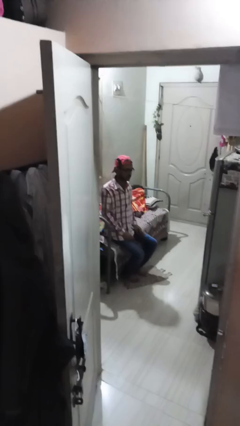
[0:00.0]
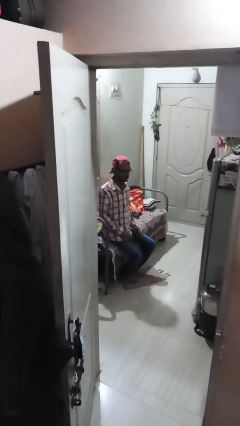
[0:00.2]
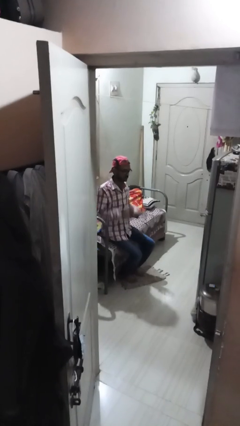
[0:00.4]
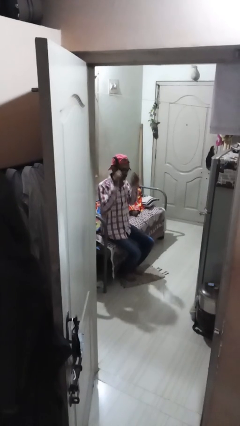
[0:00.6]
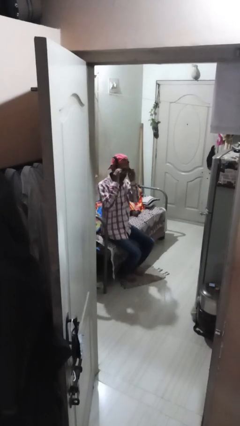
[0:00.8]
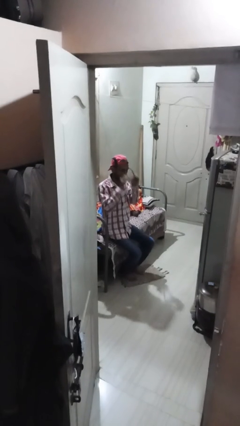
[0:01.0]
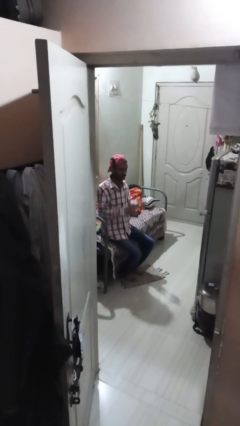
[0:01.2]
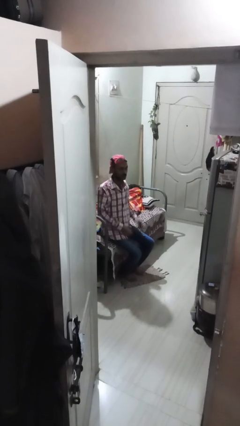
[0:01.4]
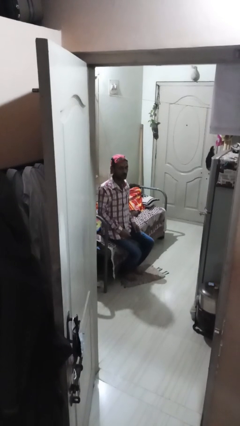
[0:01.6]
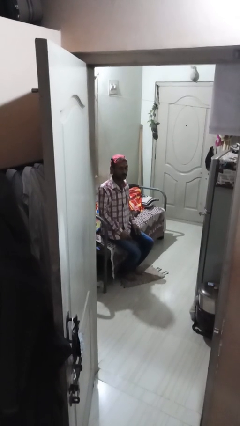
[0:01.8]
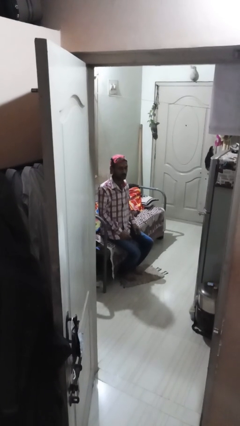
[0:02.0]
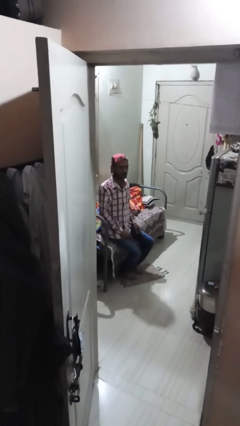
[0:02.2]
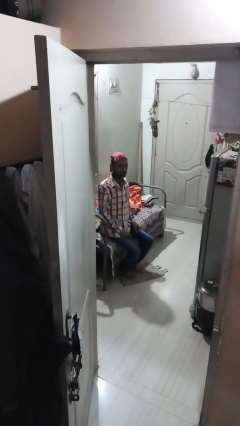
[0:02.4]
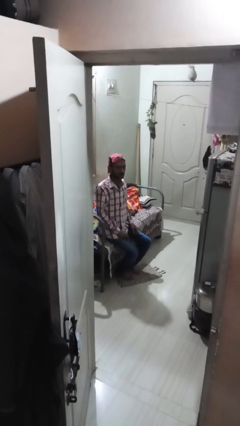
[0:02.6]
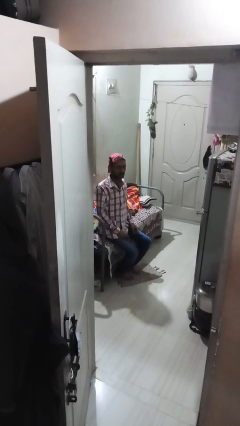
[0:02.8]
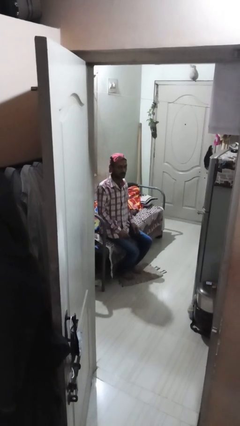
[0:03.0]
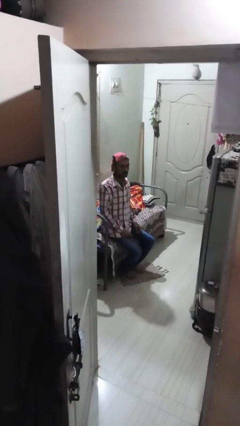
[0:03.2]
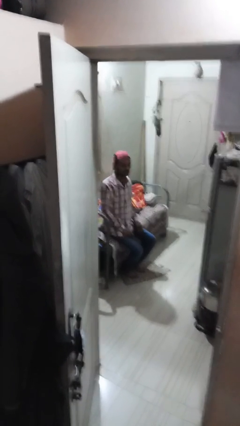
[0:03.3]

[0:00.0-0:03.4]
person takes off glasses

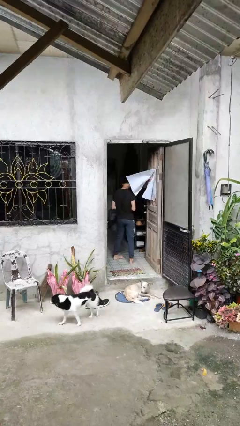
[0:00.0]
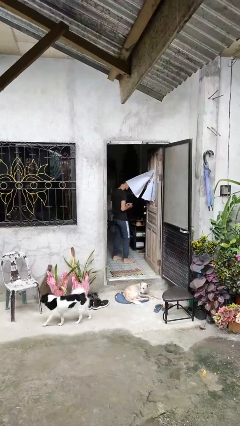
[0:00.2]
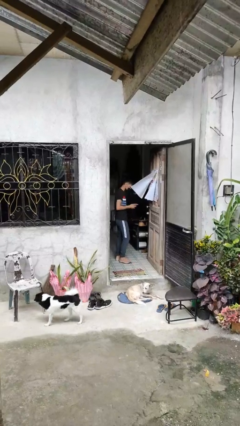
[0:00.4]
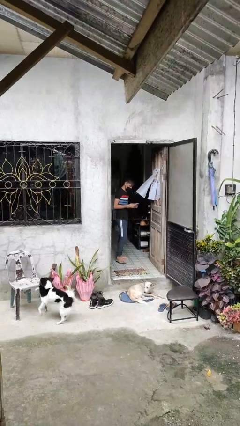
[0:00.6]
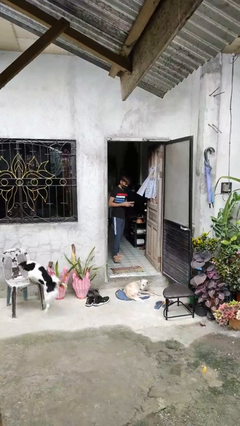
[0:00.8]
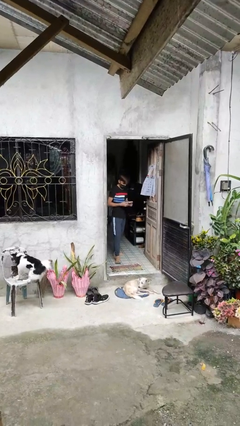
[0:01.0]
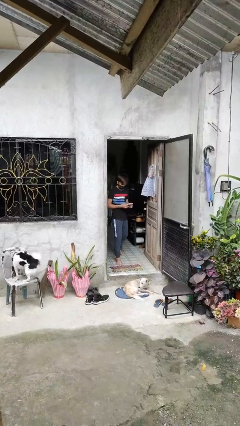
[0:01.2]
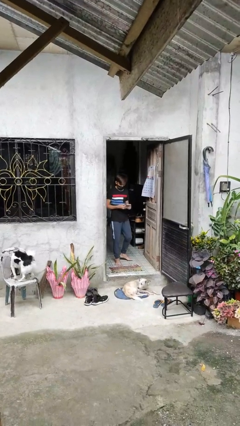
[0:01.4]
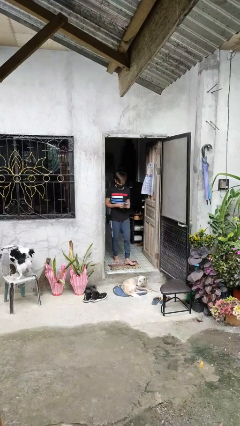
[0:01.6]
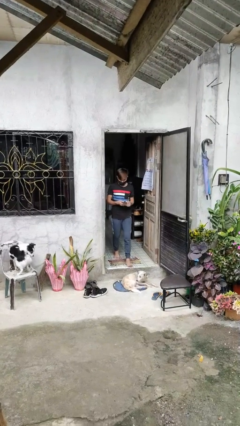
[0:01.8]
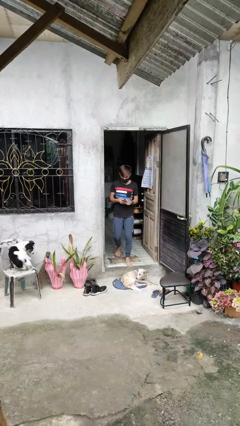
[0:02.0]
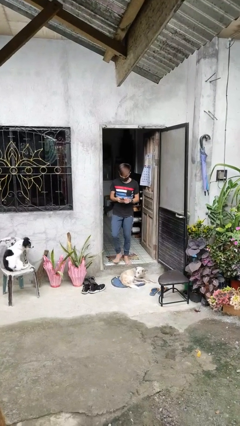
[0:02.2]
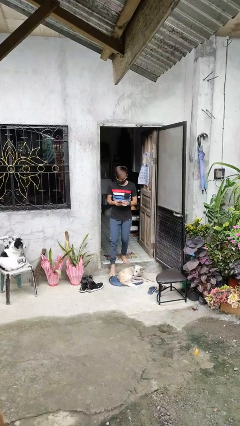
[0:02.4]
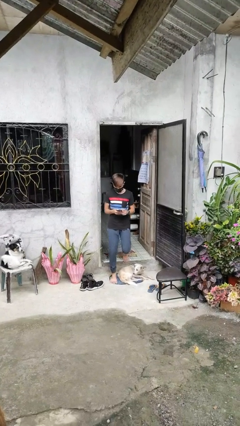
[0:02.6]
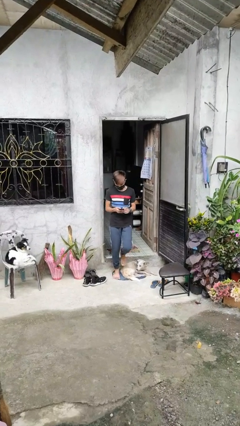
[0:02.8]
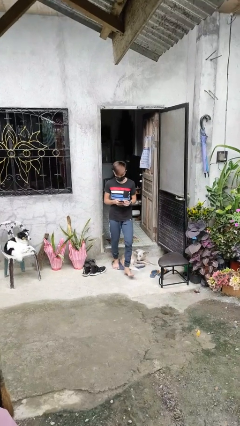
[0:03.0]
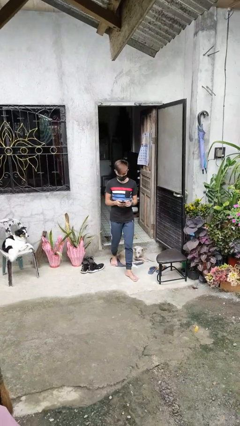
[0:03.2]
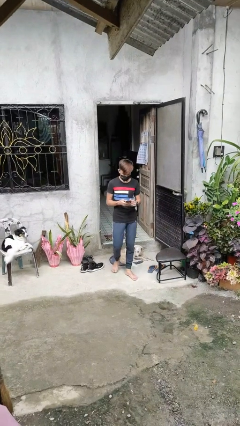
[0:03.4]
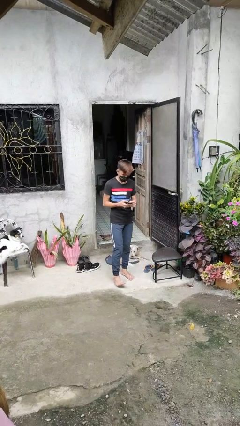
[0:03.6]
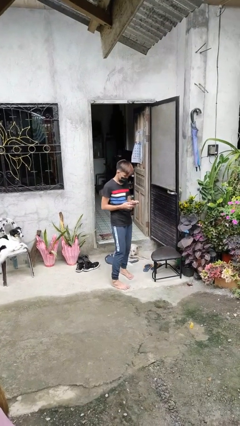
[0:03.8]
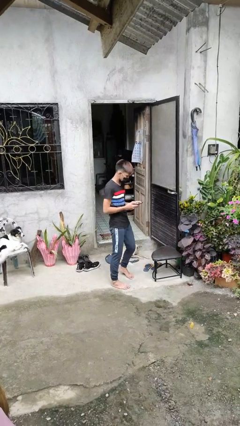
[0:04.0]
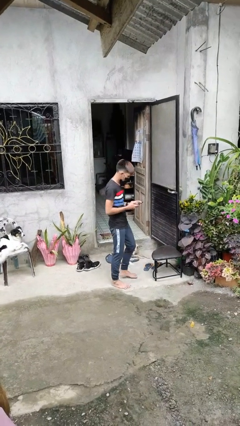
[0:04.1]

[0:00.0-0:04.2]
person enters scene through structure

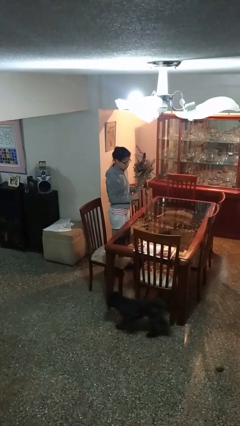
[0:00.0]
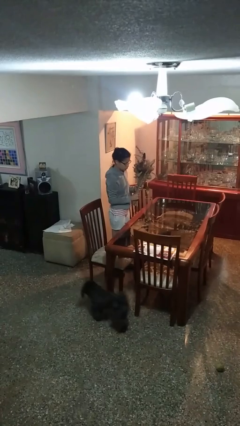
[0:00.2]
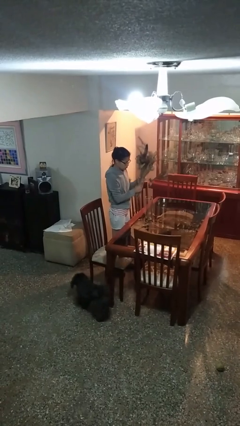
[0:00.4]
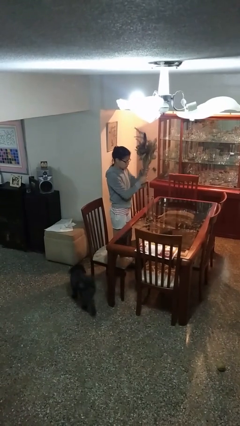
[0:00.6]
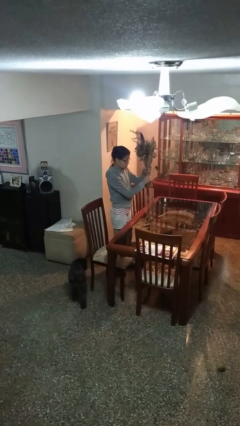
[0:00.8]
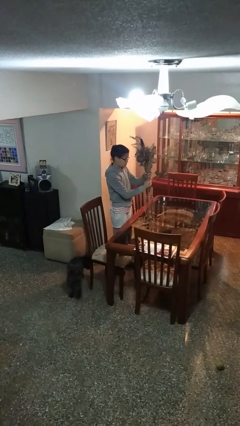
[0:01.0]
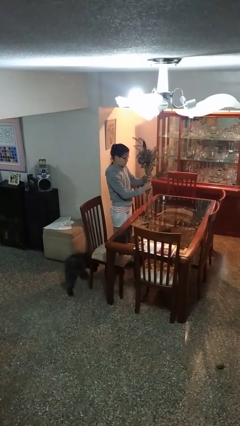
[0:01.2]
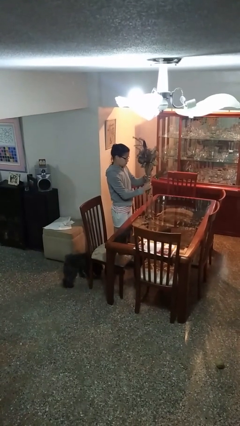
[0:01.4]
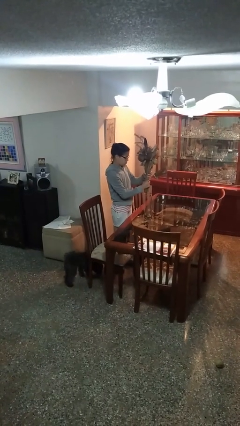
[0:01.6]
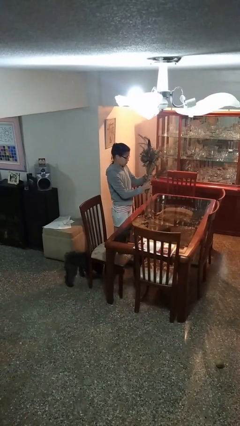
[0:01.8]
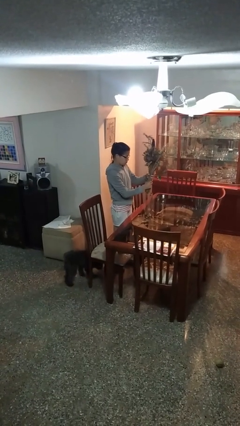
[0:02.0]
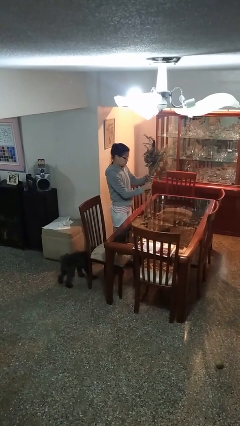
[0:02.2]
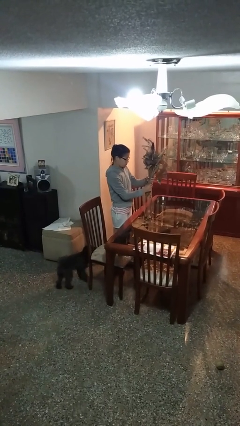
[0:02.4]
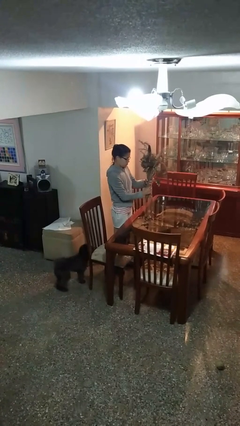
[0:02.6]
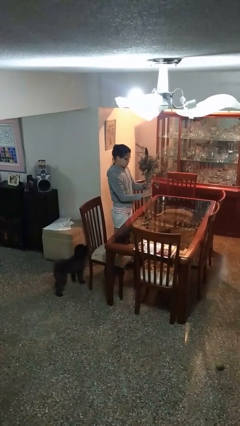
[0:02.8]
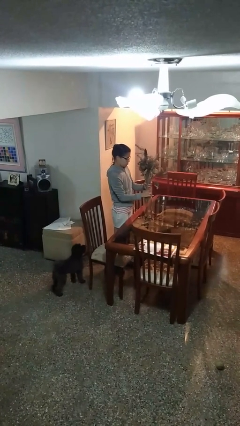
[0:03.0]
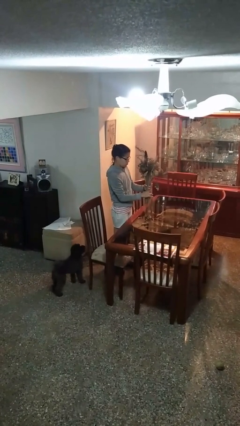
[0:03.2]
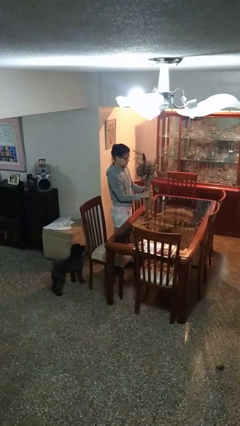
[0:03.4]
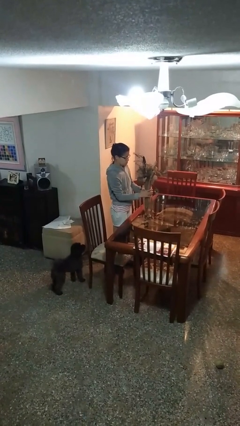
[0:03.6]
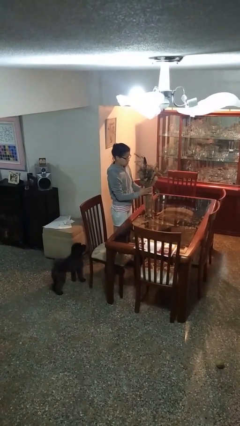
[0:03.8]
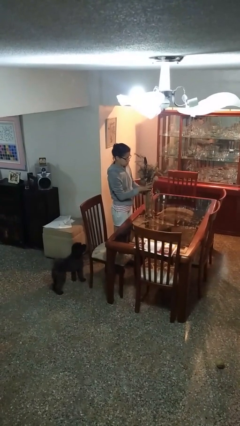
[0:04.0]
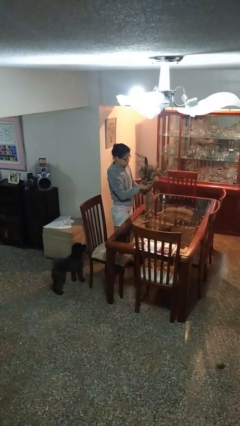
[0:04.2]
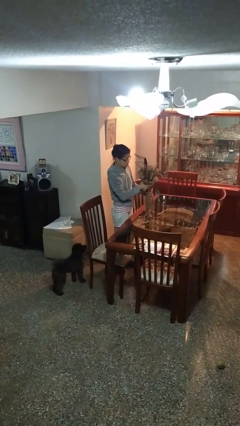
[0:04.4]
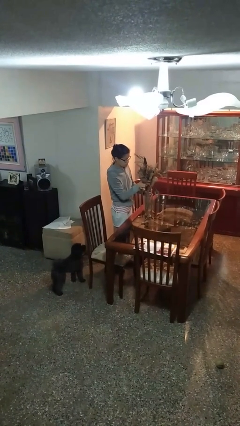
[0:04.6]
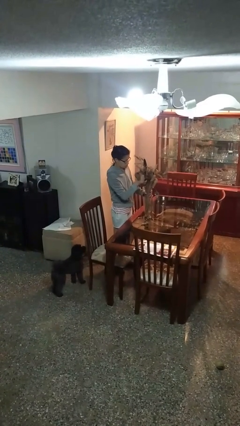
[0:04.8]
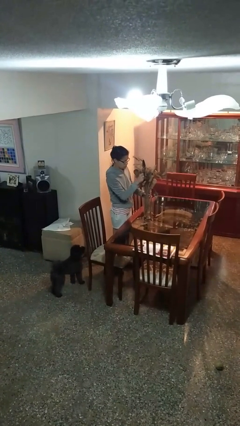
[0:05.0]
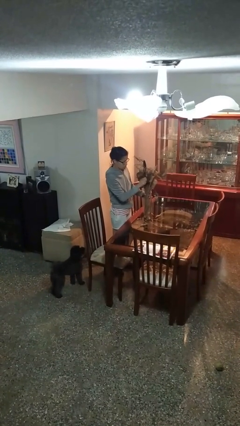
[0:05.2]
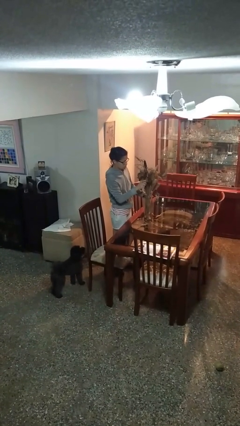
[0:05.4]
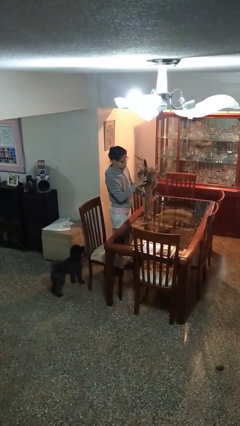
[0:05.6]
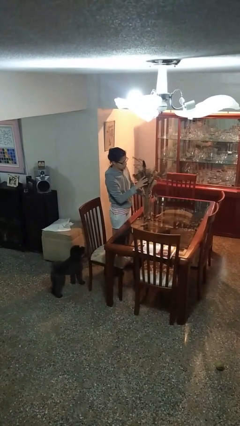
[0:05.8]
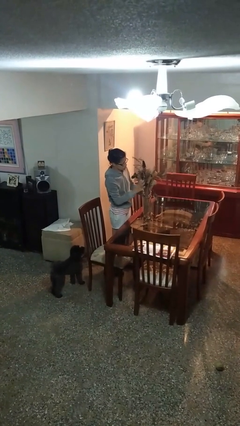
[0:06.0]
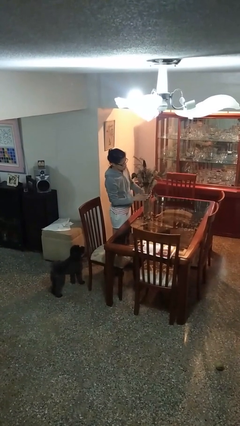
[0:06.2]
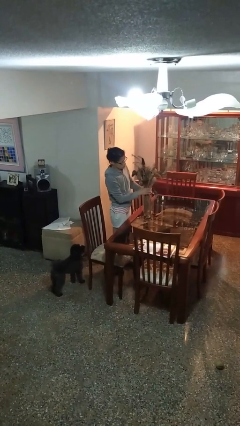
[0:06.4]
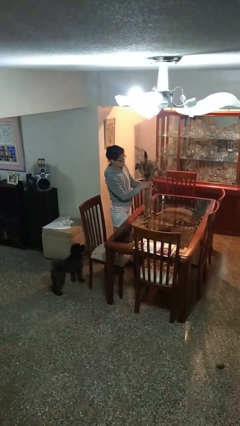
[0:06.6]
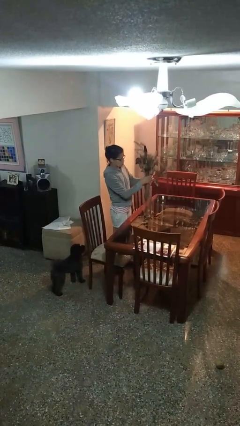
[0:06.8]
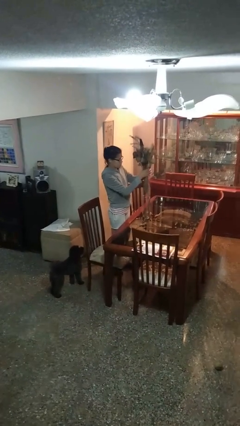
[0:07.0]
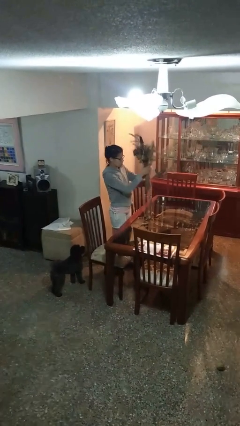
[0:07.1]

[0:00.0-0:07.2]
person arranges flowers in vase

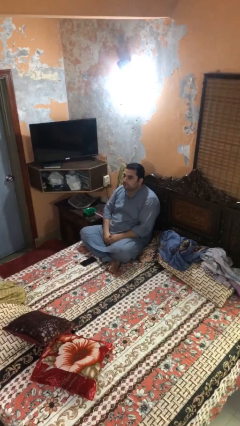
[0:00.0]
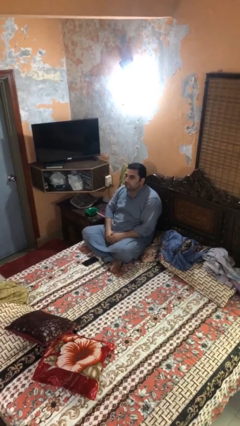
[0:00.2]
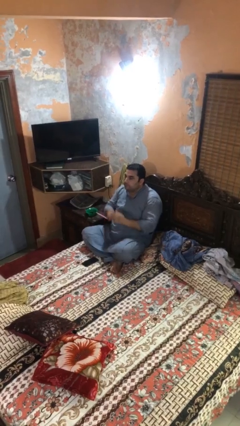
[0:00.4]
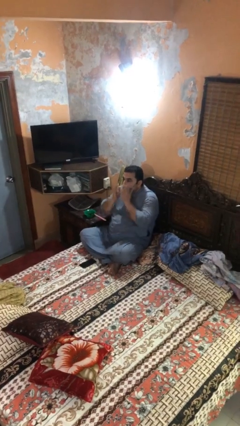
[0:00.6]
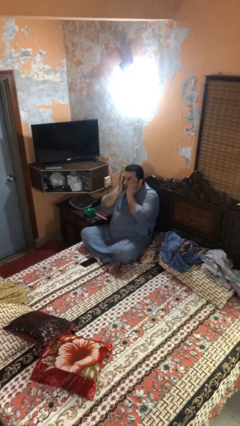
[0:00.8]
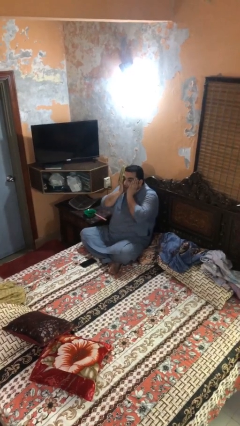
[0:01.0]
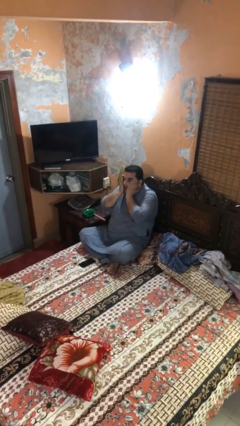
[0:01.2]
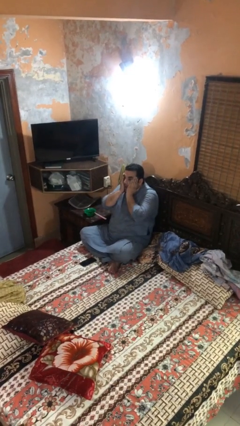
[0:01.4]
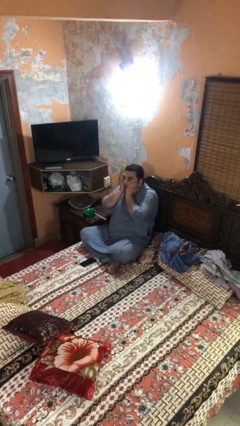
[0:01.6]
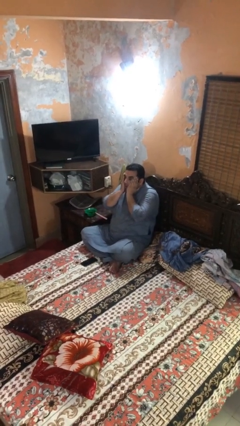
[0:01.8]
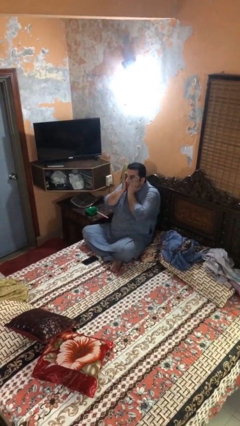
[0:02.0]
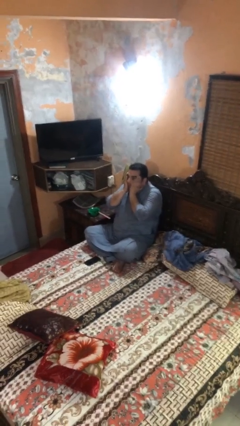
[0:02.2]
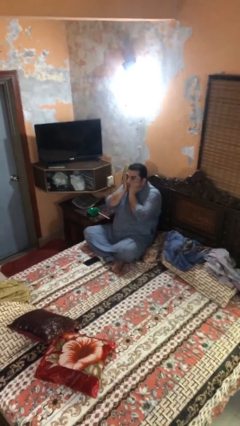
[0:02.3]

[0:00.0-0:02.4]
person covers face with hands

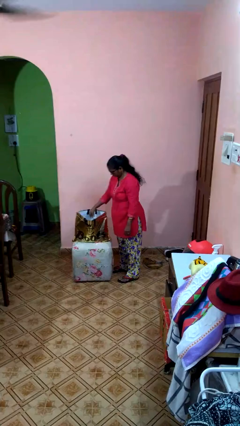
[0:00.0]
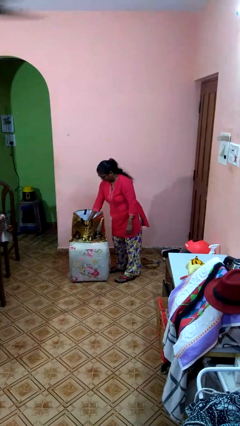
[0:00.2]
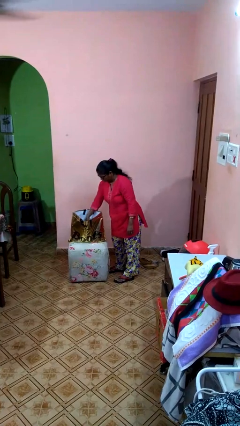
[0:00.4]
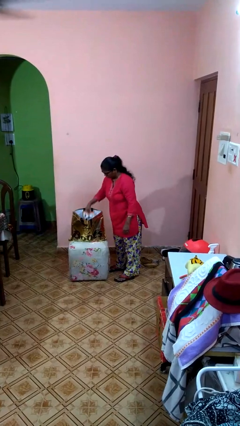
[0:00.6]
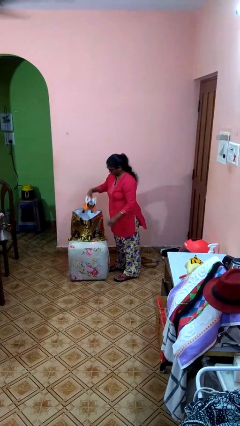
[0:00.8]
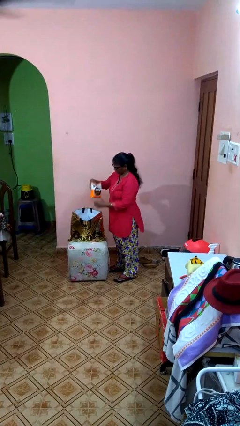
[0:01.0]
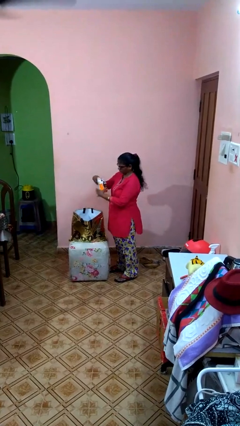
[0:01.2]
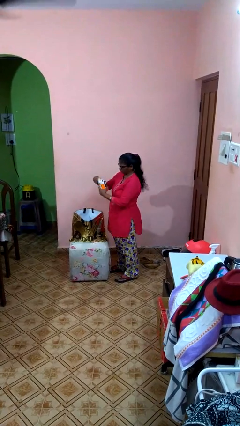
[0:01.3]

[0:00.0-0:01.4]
person takes object from bag
